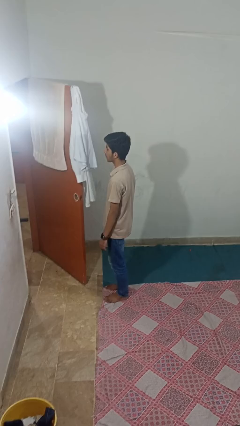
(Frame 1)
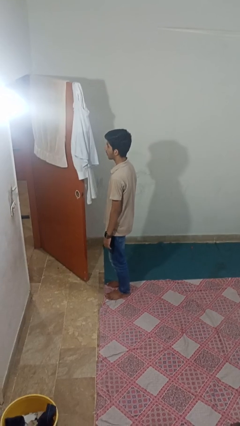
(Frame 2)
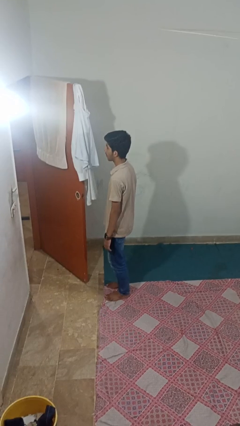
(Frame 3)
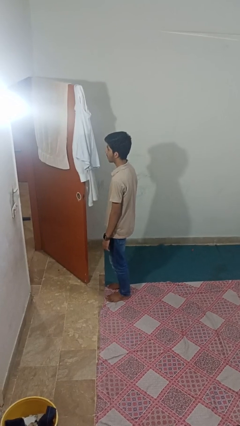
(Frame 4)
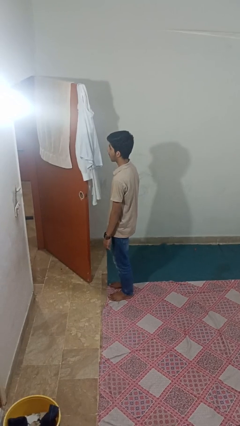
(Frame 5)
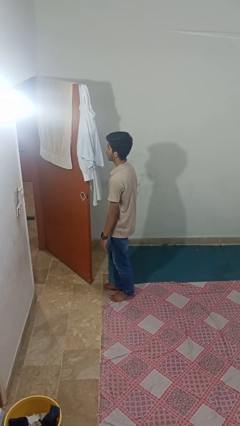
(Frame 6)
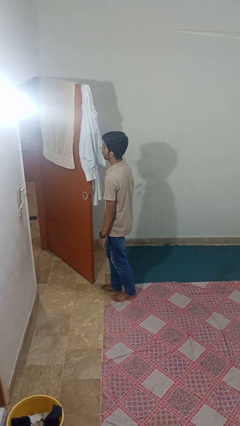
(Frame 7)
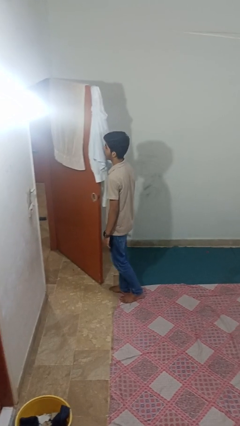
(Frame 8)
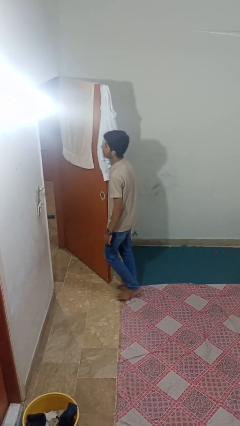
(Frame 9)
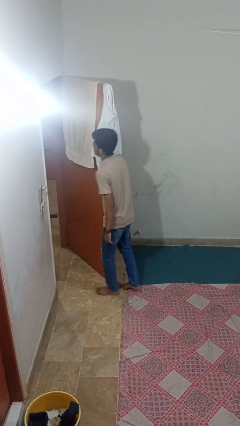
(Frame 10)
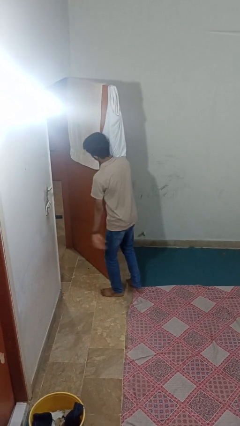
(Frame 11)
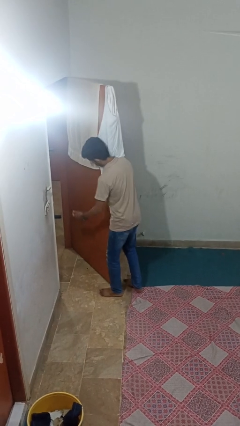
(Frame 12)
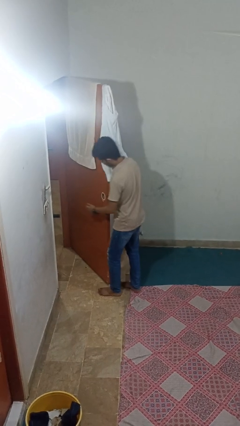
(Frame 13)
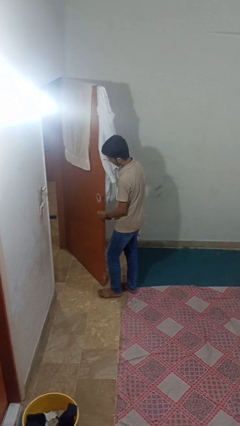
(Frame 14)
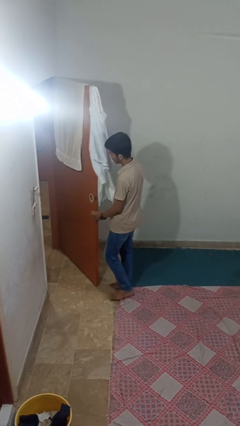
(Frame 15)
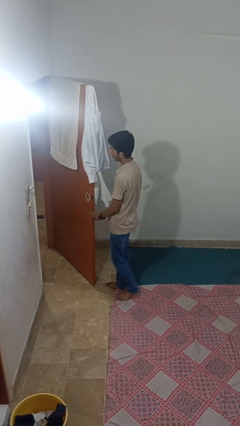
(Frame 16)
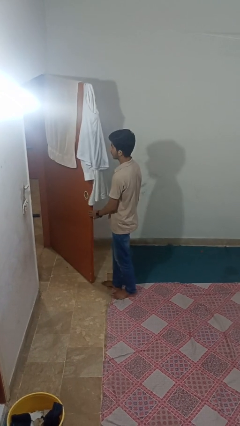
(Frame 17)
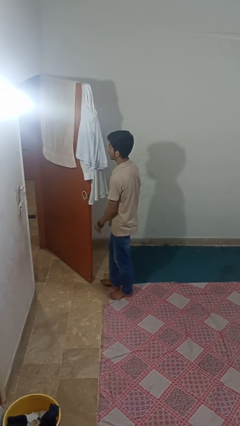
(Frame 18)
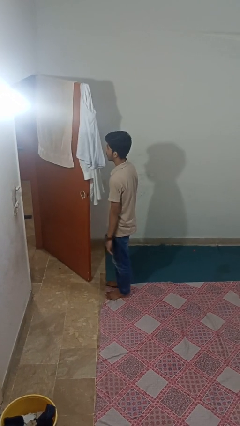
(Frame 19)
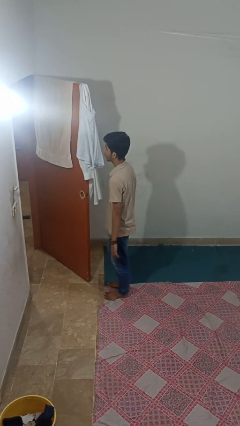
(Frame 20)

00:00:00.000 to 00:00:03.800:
person bumps into wall

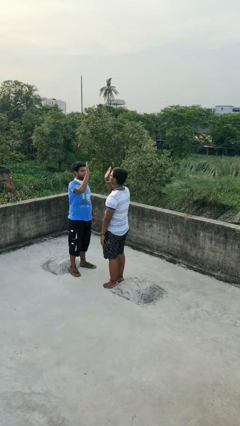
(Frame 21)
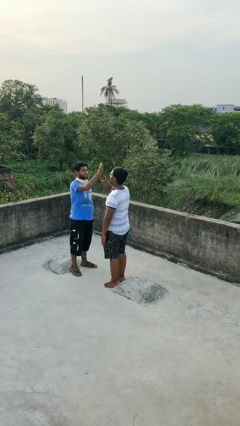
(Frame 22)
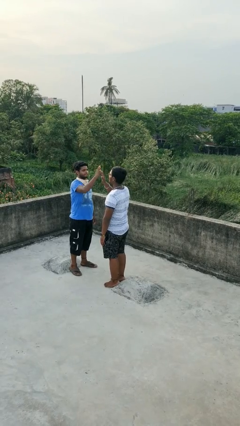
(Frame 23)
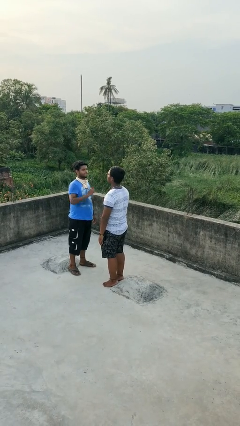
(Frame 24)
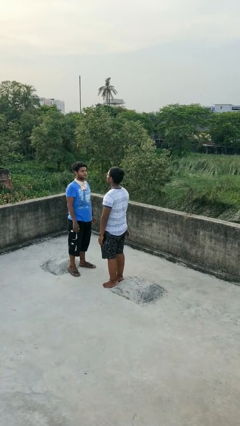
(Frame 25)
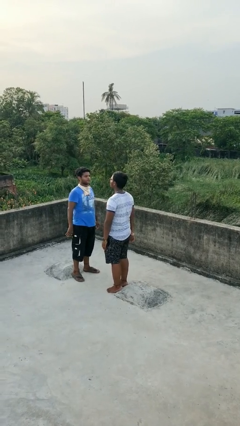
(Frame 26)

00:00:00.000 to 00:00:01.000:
person highfives hand

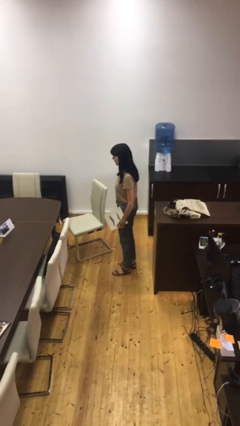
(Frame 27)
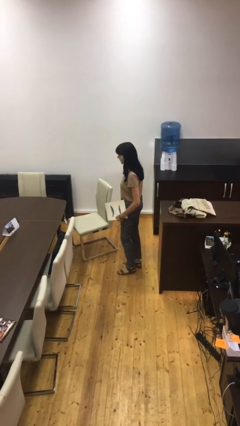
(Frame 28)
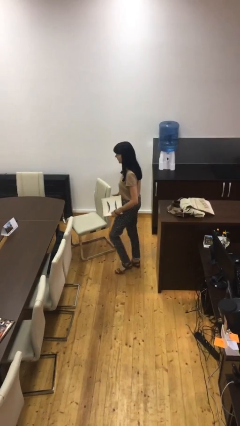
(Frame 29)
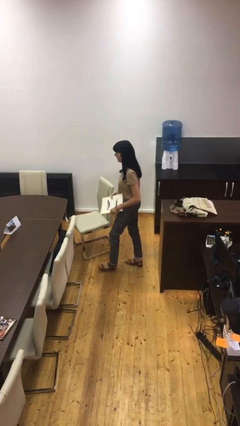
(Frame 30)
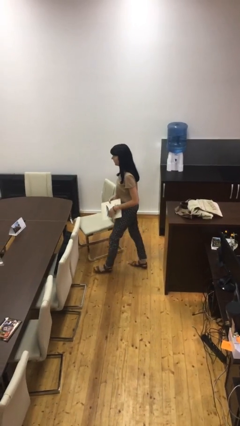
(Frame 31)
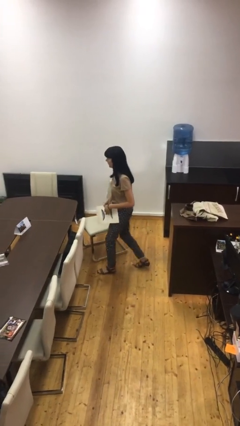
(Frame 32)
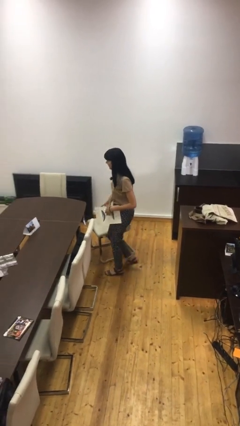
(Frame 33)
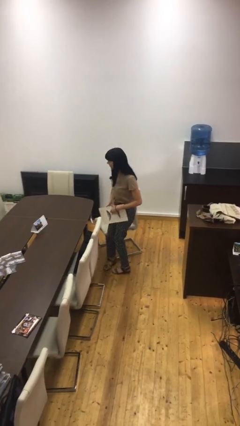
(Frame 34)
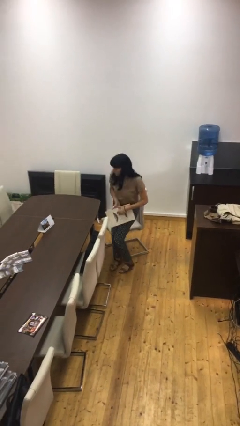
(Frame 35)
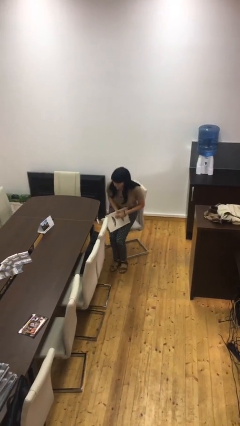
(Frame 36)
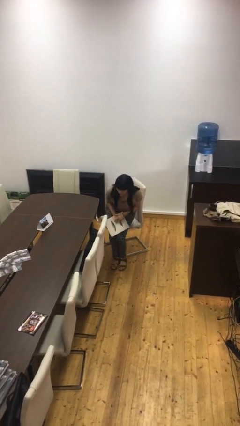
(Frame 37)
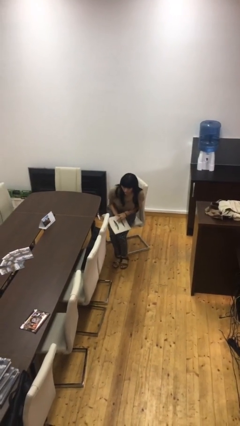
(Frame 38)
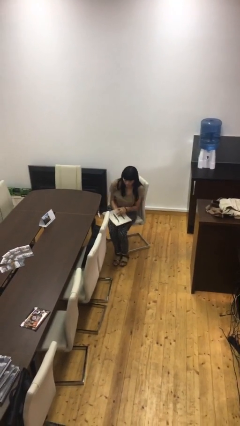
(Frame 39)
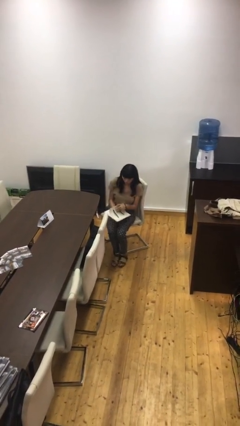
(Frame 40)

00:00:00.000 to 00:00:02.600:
person sits down

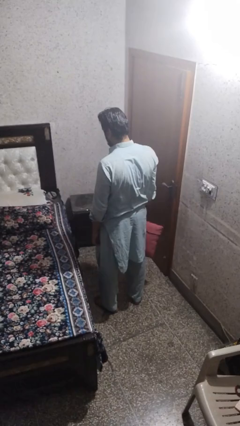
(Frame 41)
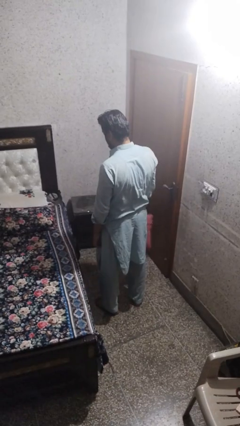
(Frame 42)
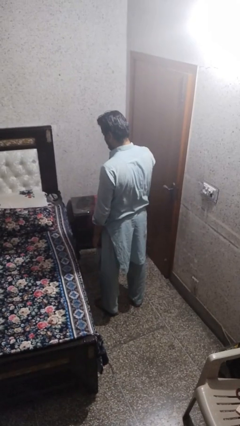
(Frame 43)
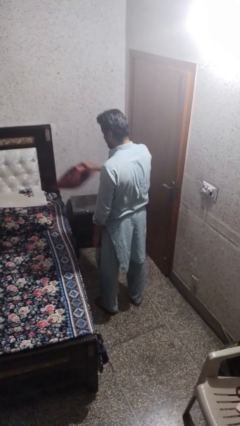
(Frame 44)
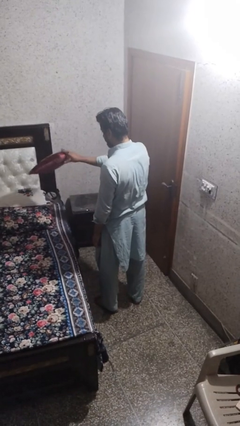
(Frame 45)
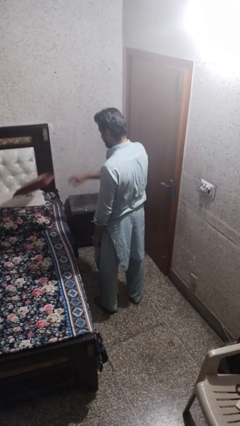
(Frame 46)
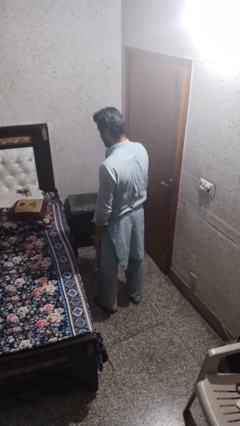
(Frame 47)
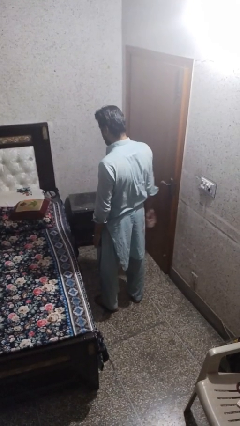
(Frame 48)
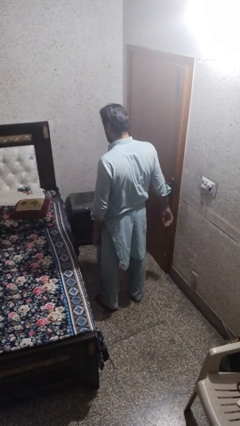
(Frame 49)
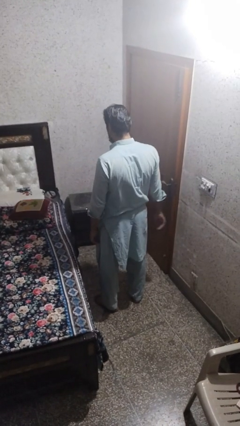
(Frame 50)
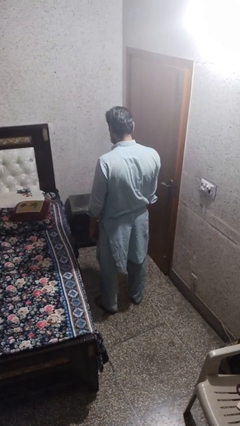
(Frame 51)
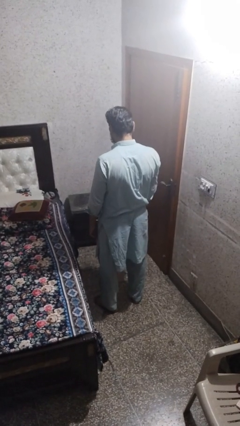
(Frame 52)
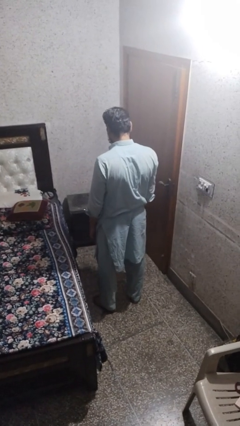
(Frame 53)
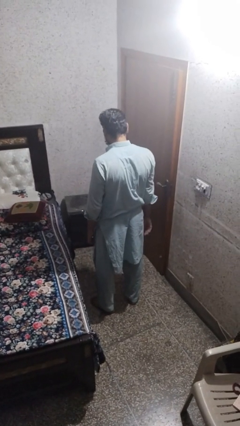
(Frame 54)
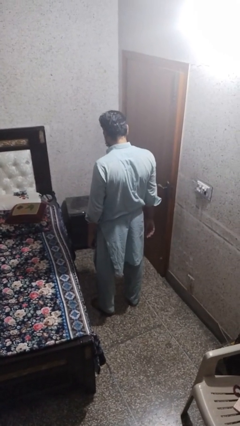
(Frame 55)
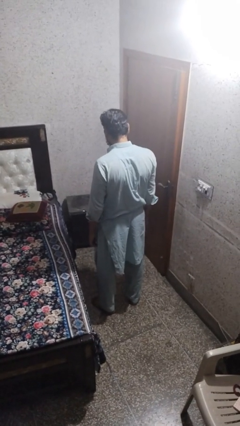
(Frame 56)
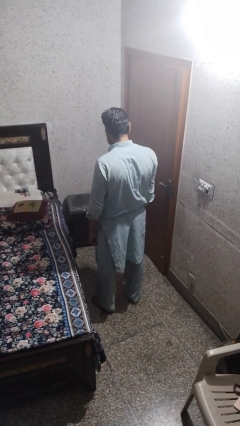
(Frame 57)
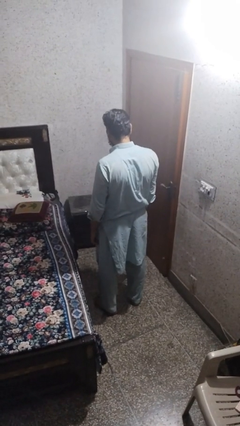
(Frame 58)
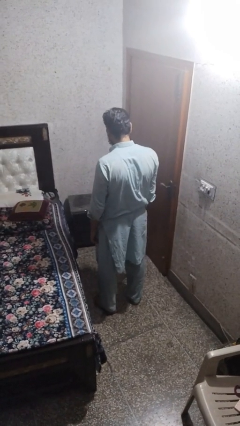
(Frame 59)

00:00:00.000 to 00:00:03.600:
person throws object on bed

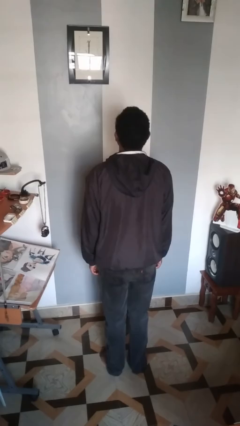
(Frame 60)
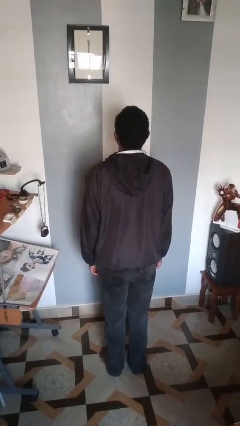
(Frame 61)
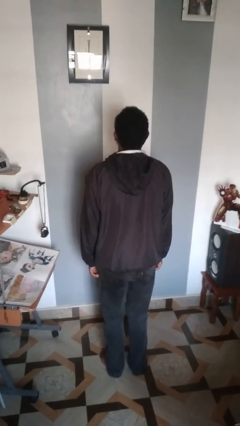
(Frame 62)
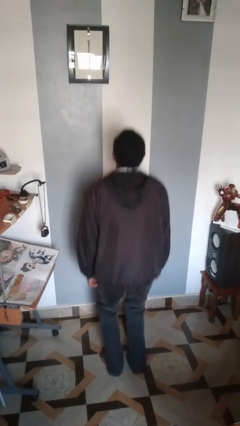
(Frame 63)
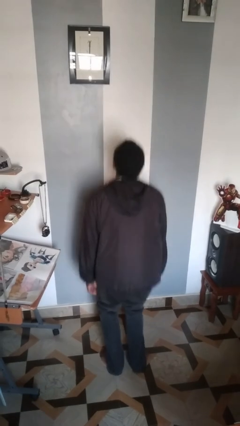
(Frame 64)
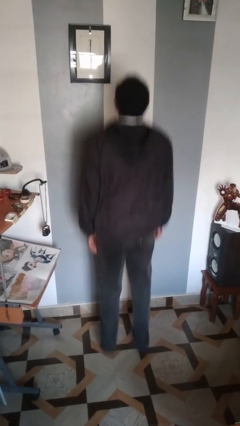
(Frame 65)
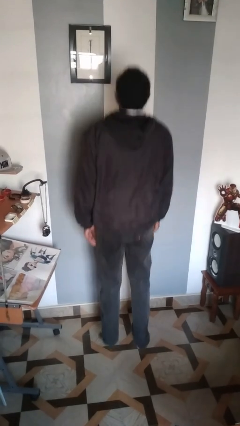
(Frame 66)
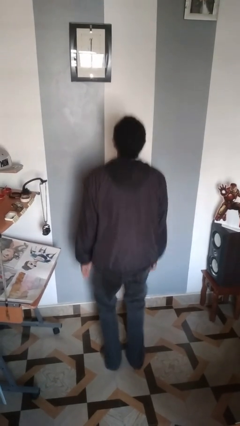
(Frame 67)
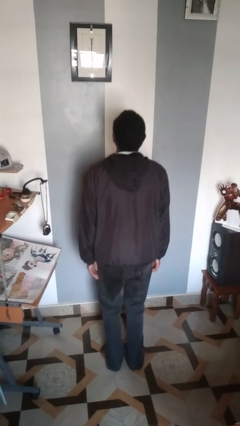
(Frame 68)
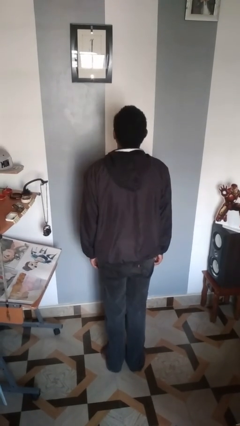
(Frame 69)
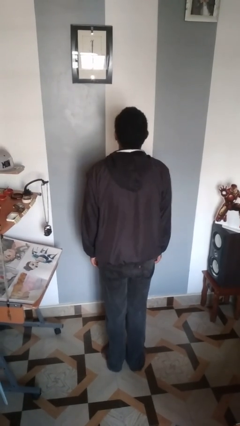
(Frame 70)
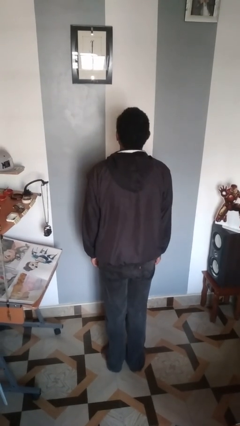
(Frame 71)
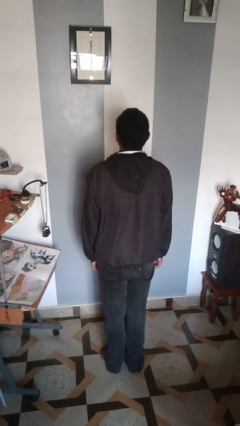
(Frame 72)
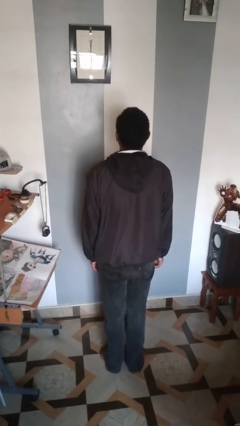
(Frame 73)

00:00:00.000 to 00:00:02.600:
person jumps

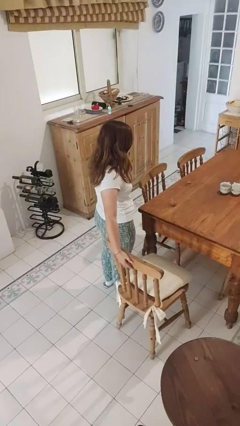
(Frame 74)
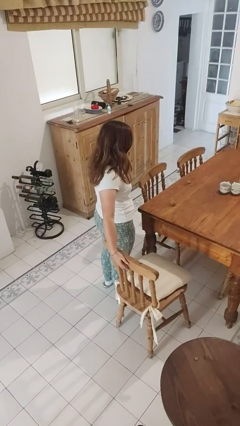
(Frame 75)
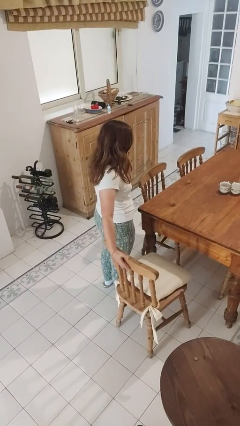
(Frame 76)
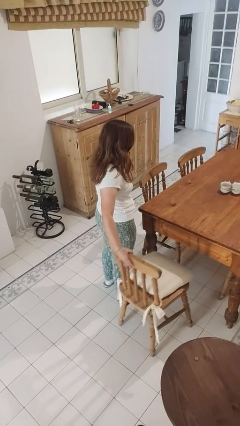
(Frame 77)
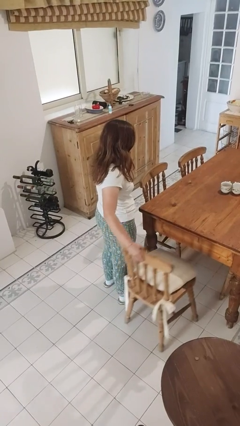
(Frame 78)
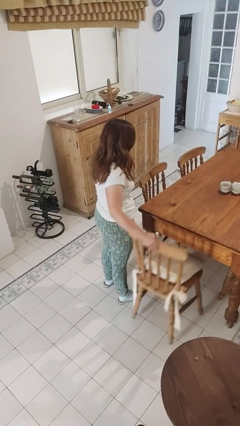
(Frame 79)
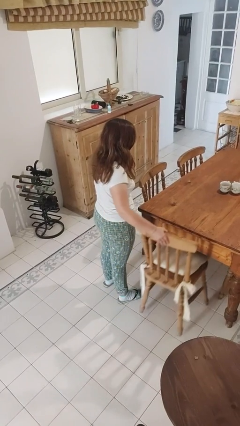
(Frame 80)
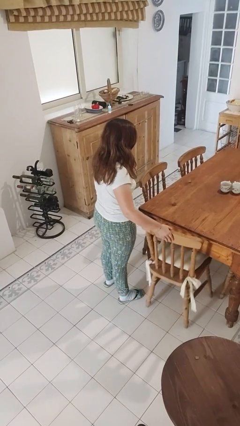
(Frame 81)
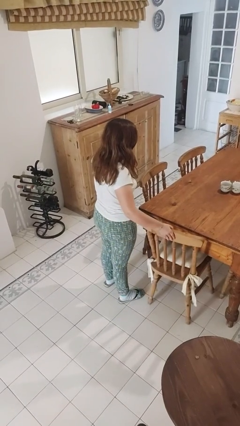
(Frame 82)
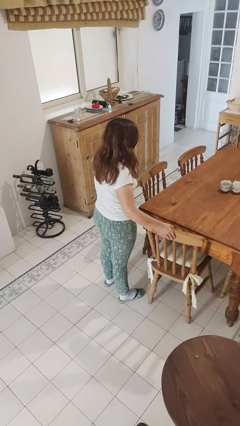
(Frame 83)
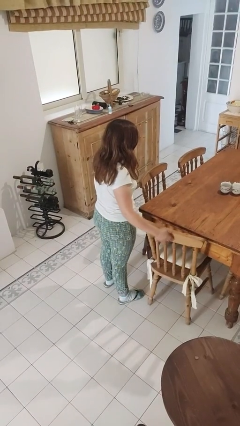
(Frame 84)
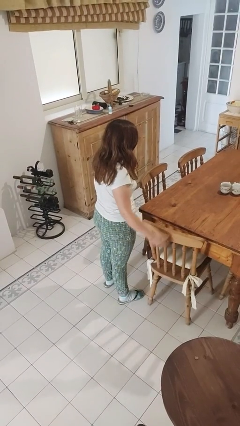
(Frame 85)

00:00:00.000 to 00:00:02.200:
person pushes in chair

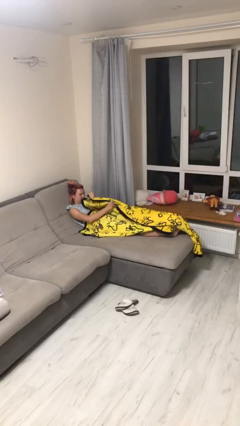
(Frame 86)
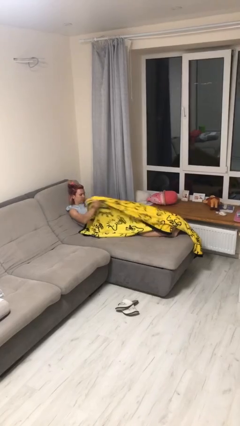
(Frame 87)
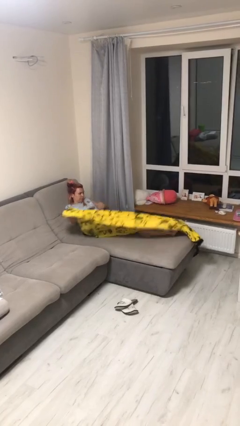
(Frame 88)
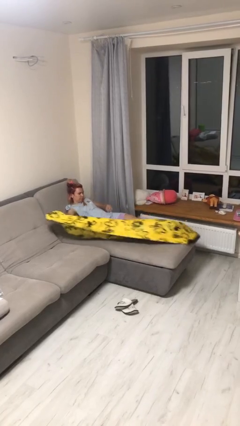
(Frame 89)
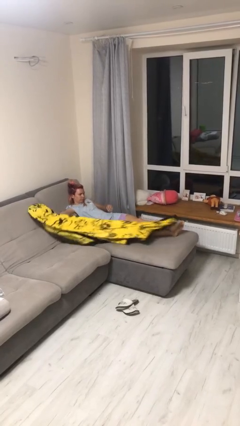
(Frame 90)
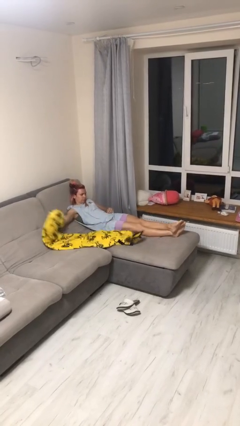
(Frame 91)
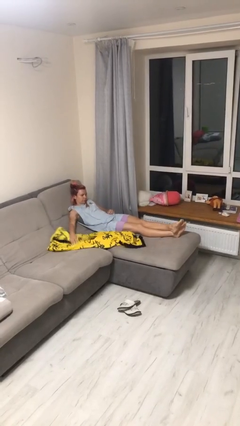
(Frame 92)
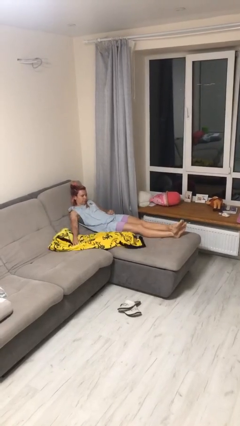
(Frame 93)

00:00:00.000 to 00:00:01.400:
person uncovers with blanket
